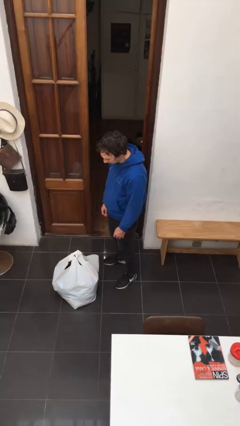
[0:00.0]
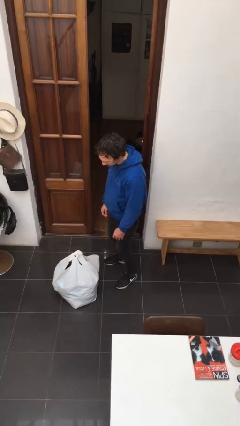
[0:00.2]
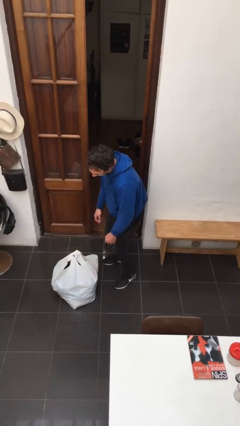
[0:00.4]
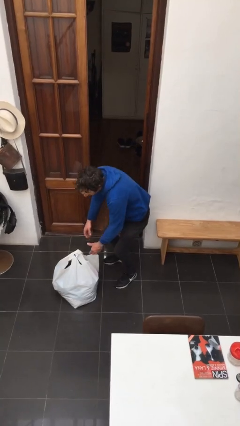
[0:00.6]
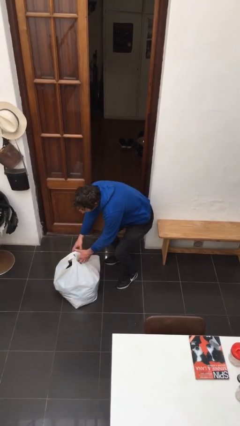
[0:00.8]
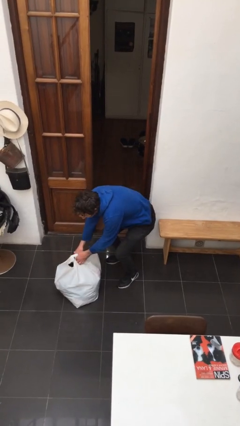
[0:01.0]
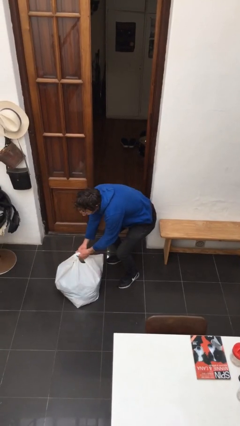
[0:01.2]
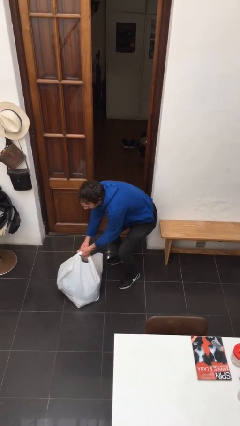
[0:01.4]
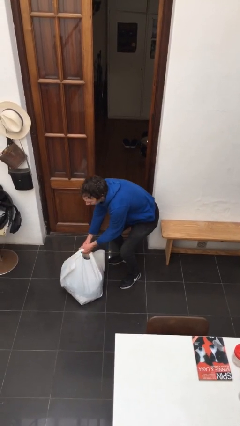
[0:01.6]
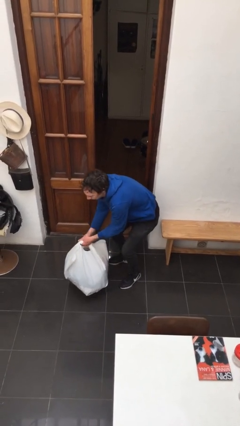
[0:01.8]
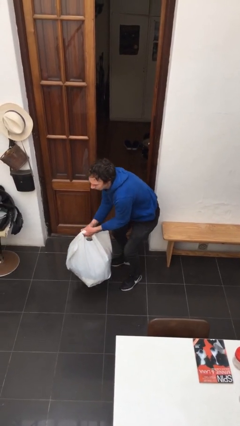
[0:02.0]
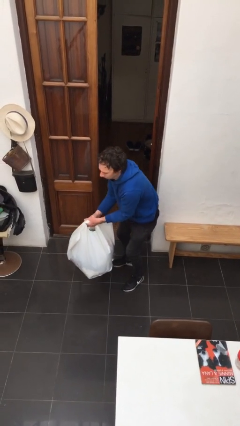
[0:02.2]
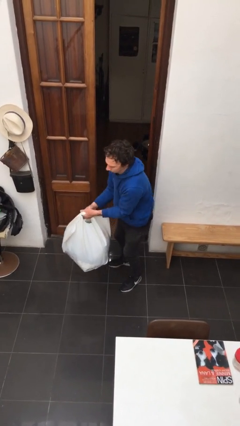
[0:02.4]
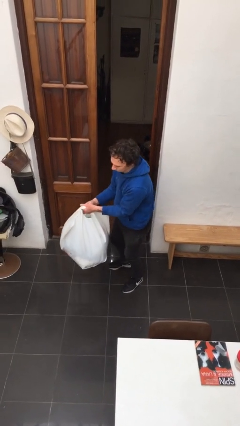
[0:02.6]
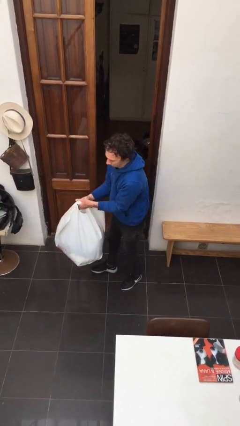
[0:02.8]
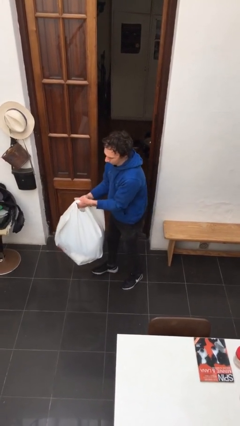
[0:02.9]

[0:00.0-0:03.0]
person picks up object from floor

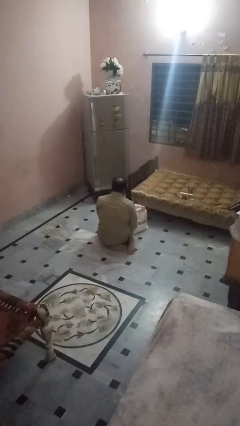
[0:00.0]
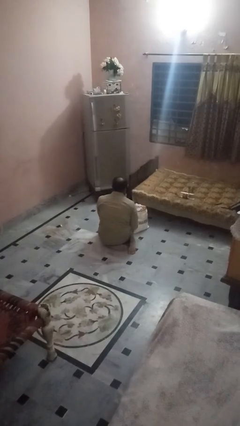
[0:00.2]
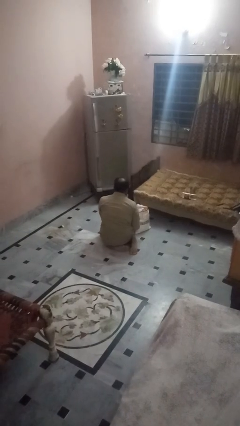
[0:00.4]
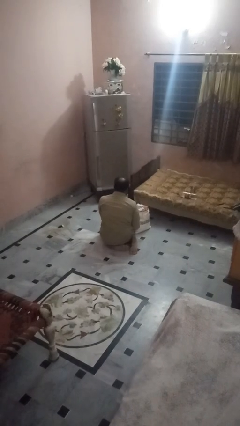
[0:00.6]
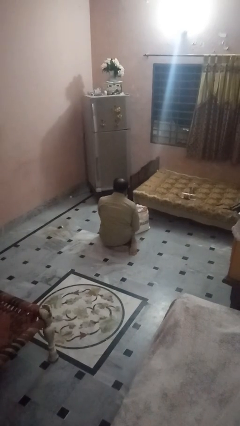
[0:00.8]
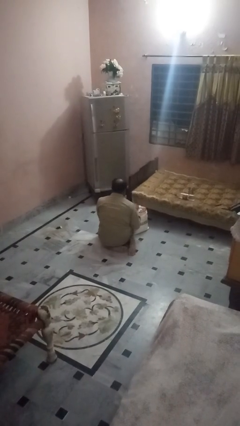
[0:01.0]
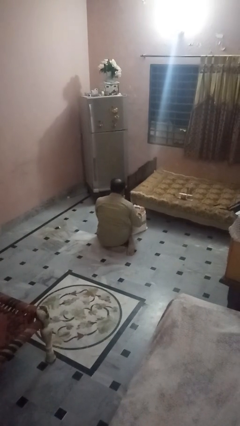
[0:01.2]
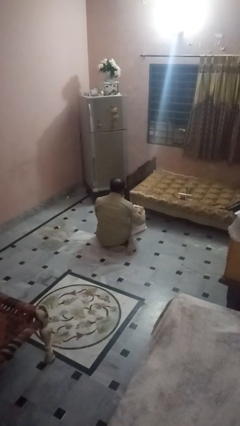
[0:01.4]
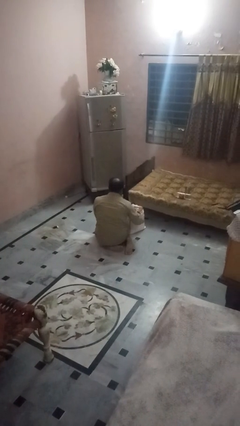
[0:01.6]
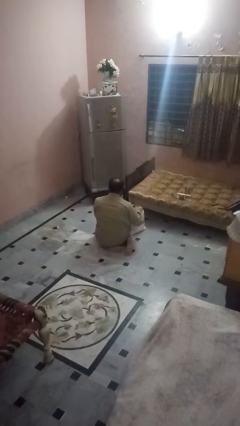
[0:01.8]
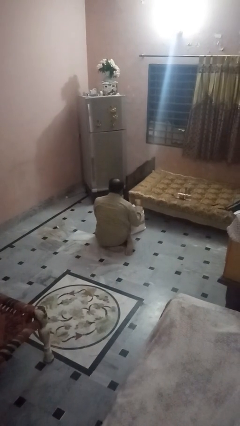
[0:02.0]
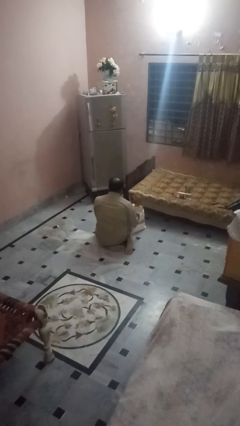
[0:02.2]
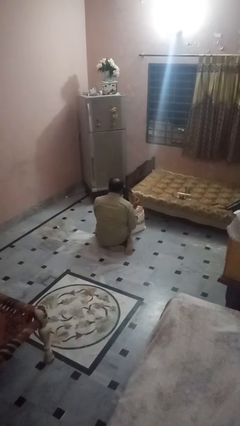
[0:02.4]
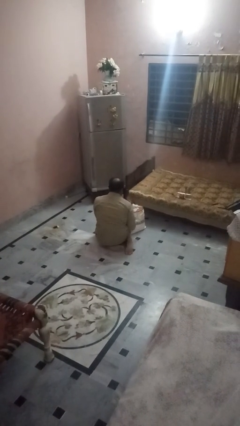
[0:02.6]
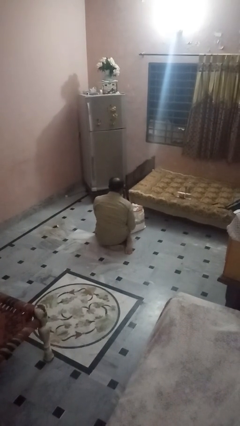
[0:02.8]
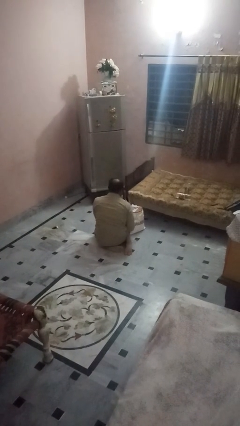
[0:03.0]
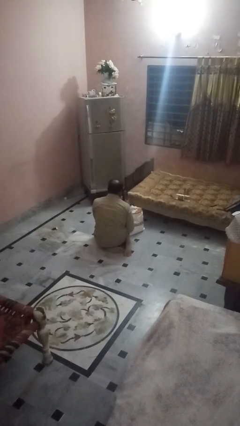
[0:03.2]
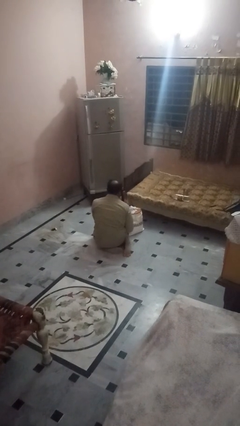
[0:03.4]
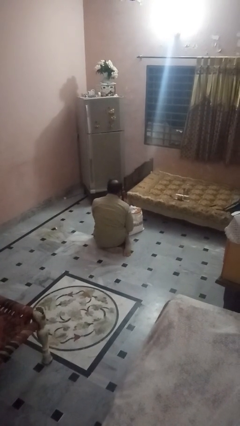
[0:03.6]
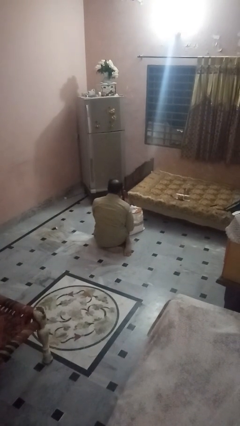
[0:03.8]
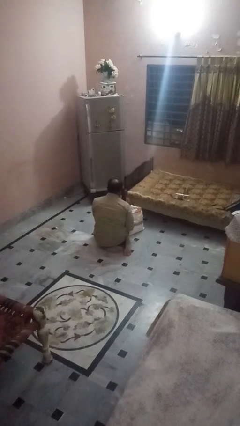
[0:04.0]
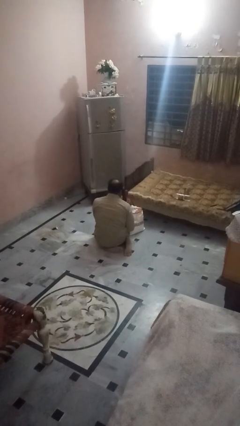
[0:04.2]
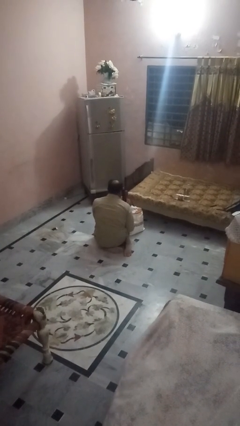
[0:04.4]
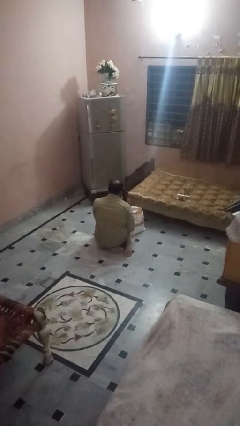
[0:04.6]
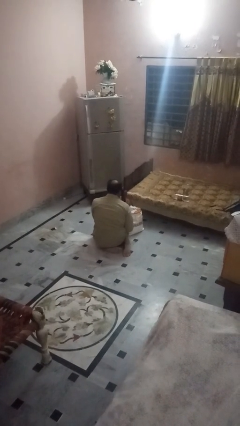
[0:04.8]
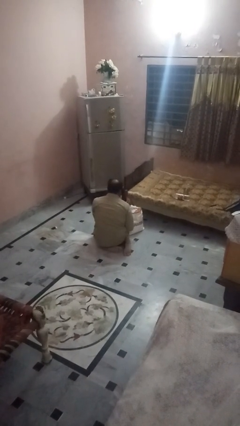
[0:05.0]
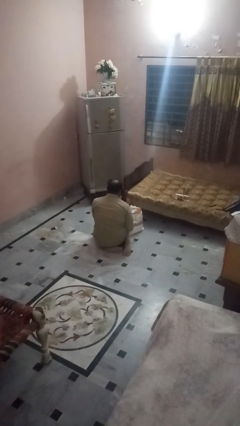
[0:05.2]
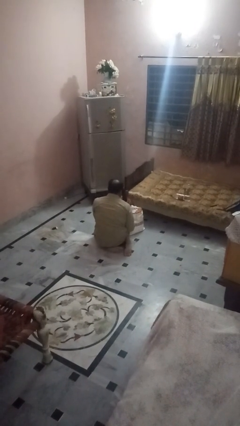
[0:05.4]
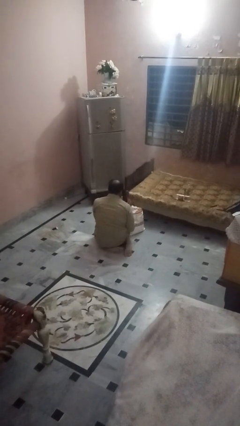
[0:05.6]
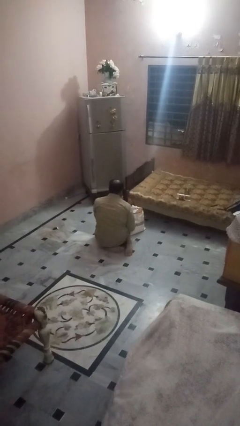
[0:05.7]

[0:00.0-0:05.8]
person takes object from bag

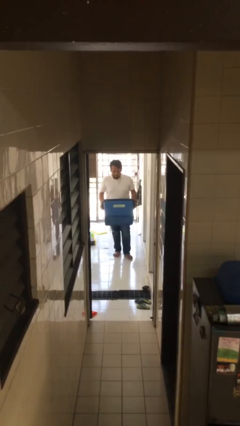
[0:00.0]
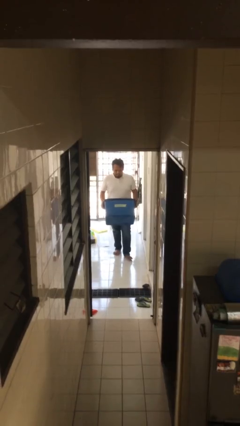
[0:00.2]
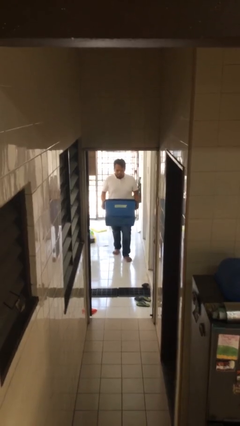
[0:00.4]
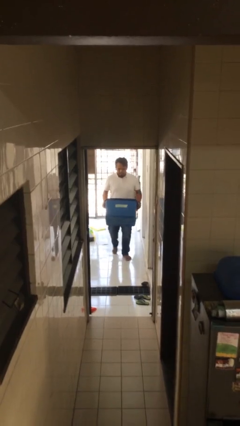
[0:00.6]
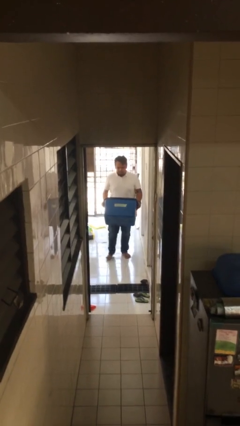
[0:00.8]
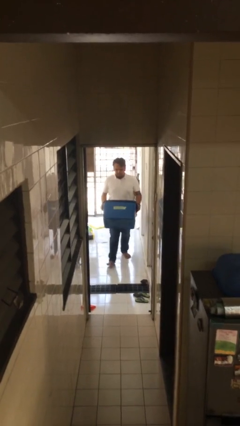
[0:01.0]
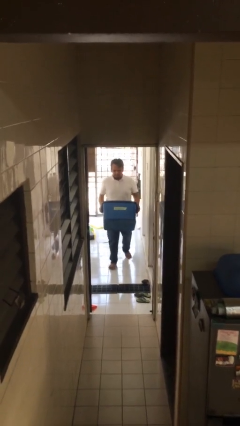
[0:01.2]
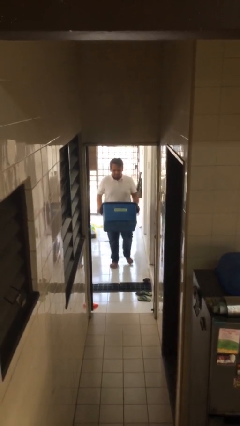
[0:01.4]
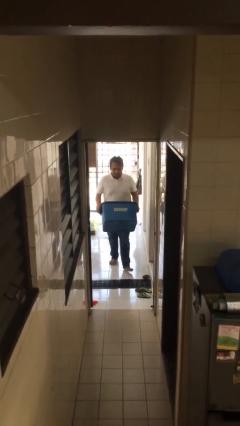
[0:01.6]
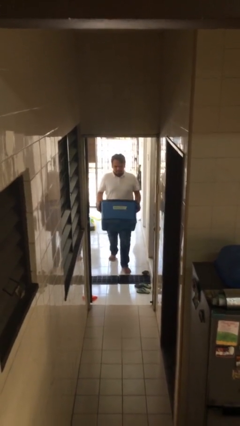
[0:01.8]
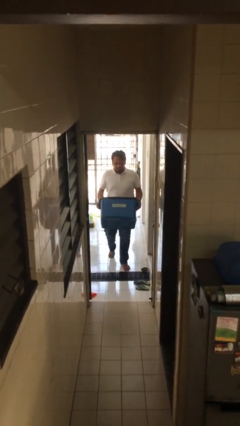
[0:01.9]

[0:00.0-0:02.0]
person carries heavy object

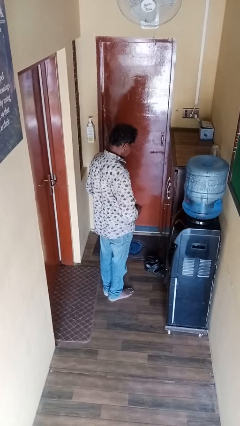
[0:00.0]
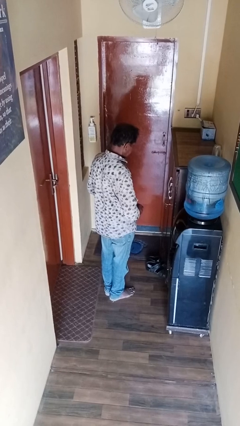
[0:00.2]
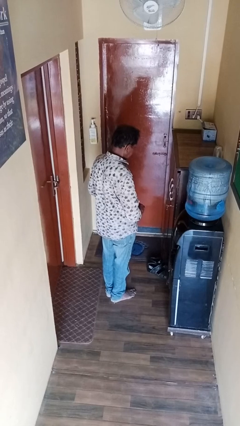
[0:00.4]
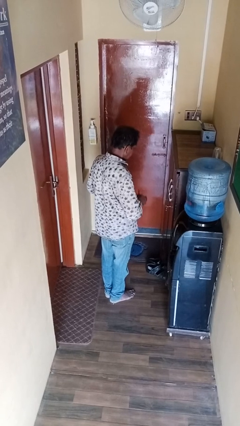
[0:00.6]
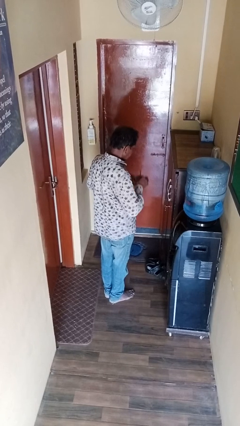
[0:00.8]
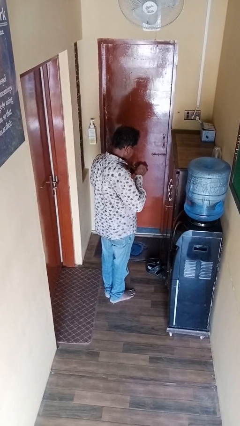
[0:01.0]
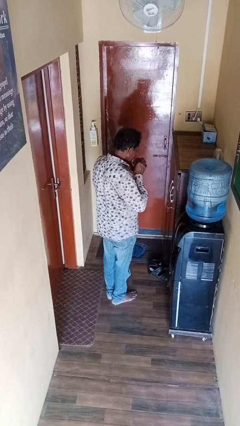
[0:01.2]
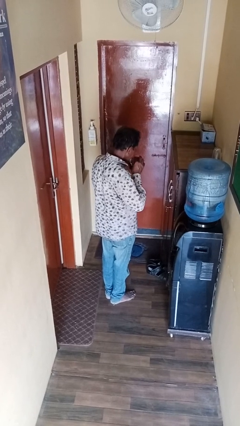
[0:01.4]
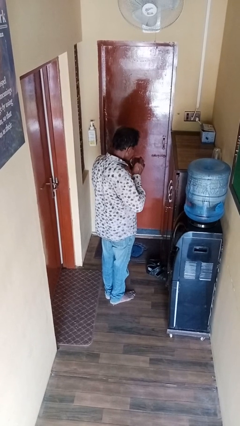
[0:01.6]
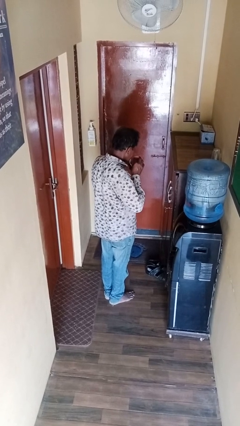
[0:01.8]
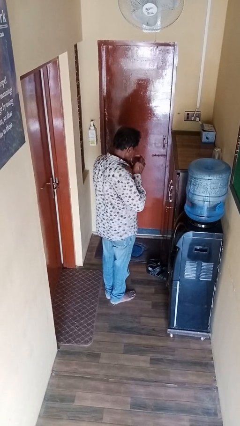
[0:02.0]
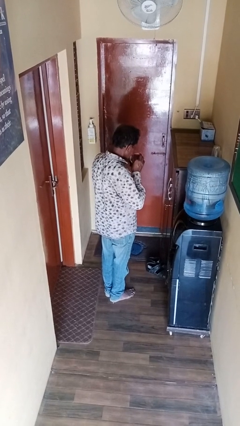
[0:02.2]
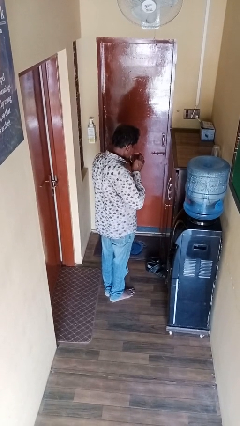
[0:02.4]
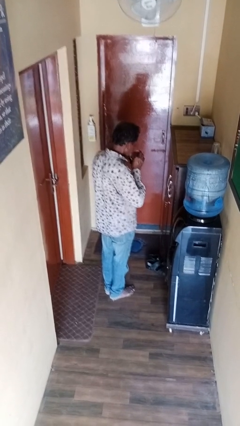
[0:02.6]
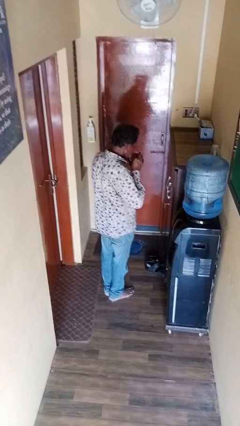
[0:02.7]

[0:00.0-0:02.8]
person drinks from straw

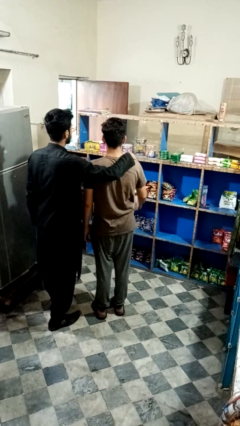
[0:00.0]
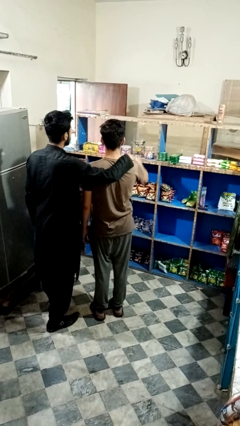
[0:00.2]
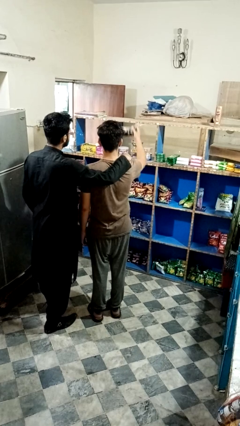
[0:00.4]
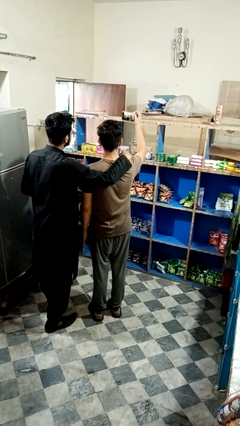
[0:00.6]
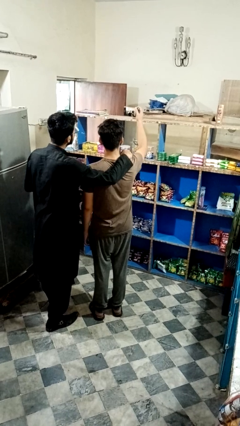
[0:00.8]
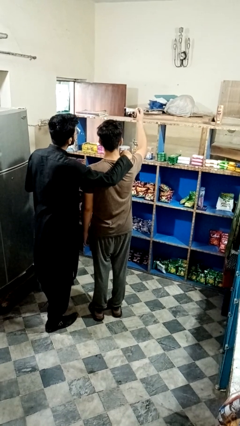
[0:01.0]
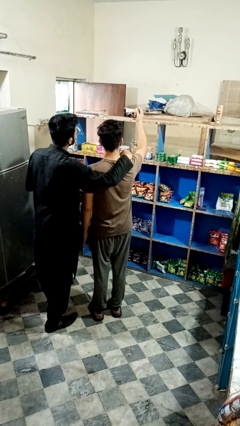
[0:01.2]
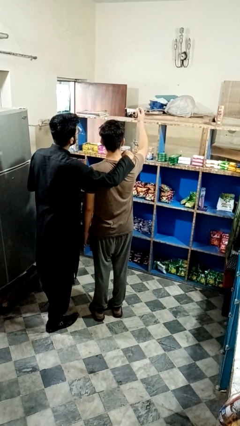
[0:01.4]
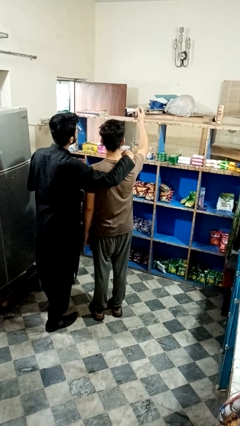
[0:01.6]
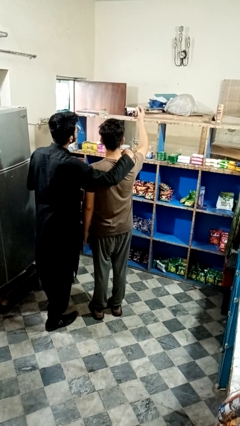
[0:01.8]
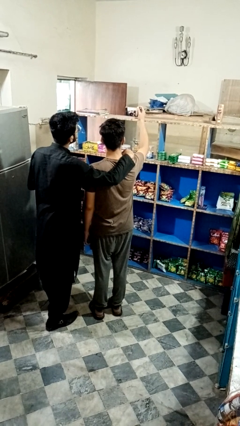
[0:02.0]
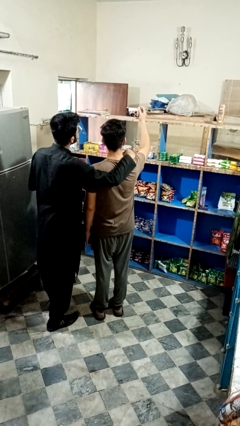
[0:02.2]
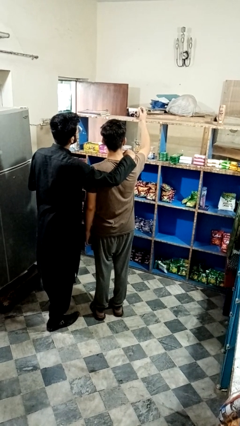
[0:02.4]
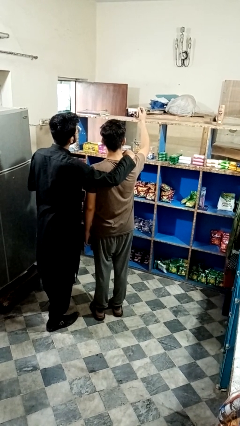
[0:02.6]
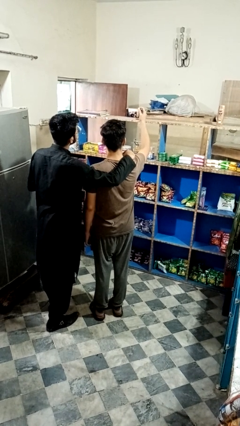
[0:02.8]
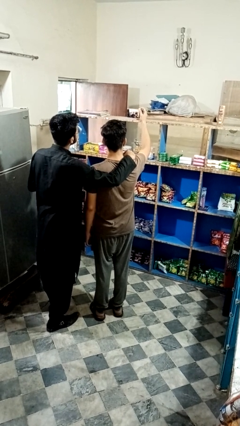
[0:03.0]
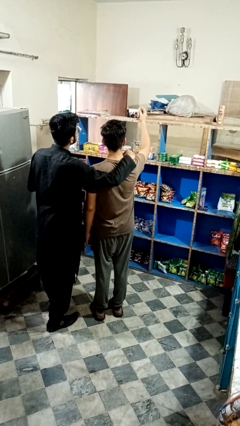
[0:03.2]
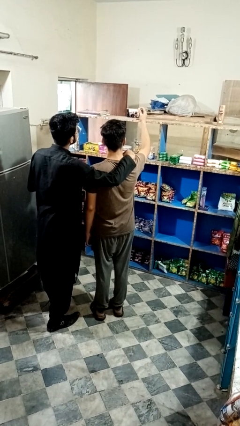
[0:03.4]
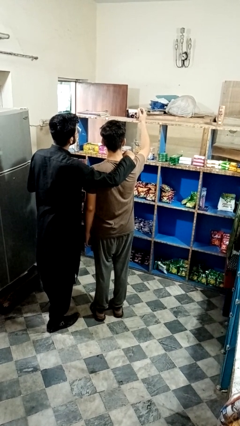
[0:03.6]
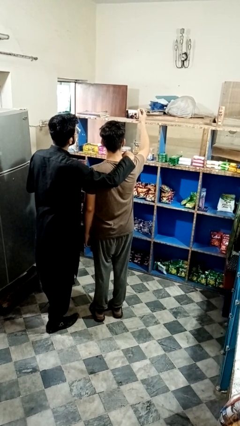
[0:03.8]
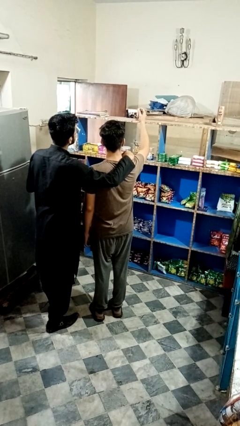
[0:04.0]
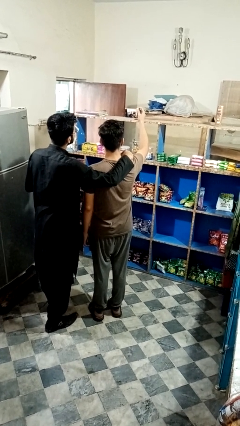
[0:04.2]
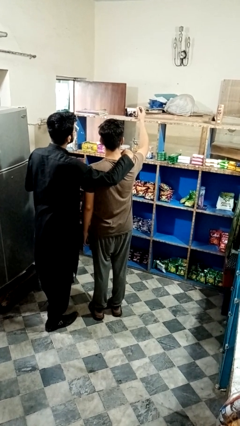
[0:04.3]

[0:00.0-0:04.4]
person takes selfie with person
